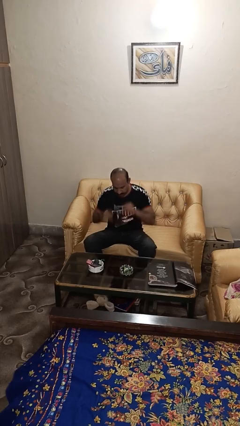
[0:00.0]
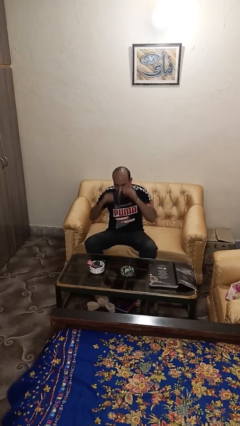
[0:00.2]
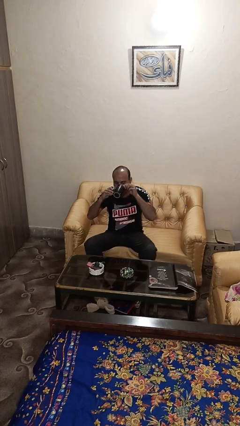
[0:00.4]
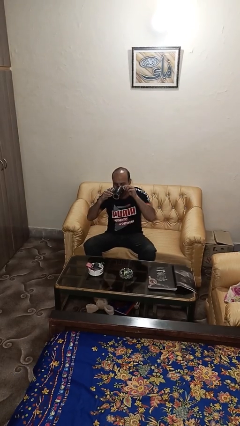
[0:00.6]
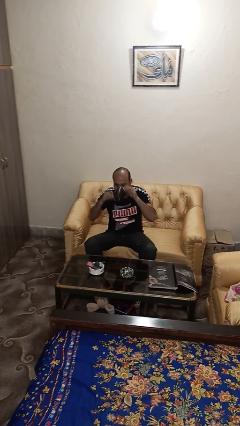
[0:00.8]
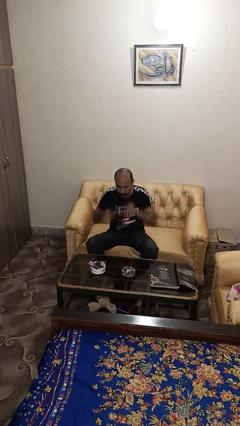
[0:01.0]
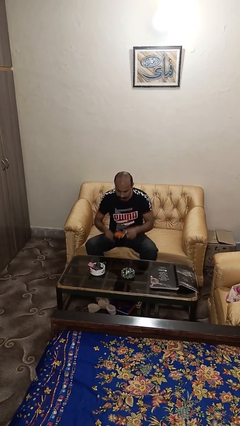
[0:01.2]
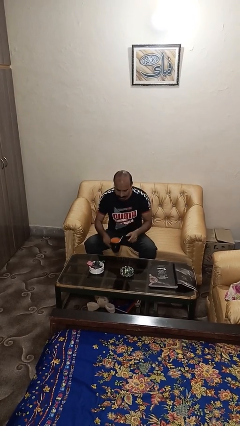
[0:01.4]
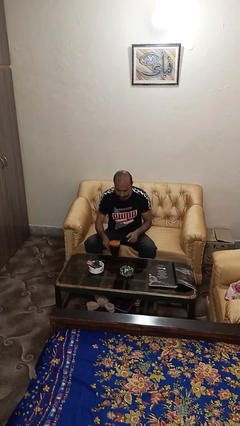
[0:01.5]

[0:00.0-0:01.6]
person drinks from mug

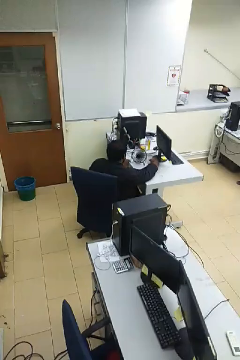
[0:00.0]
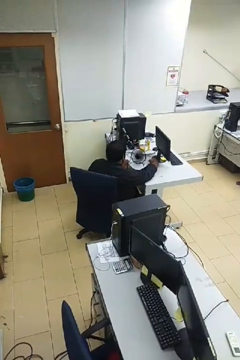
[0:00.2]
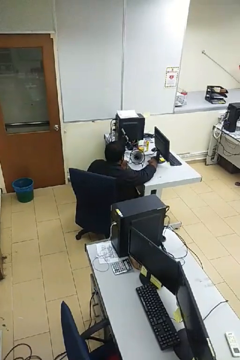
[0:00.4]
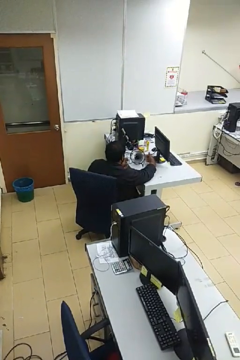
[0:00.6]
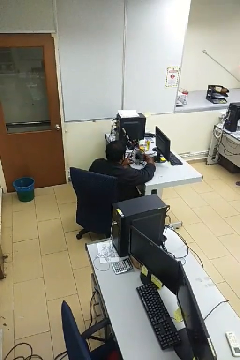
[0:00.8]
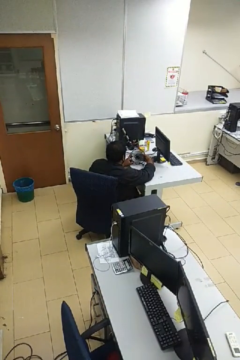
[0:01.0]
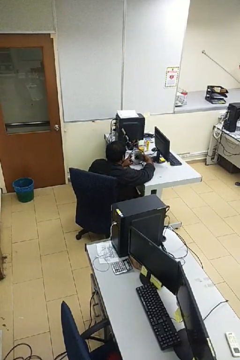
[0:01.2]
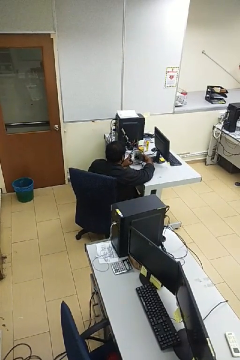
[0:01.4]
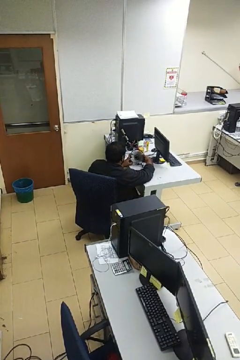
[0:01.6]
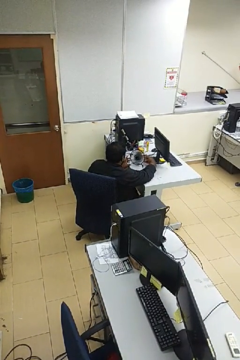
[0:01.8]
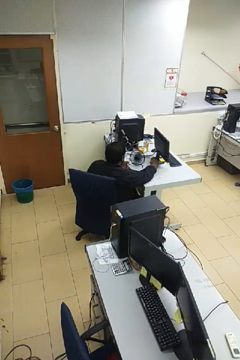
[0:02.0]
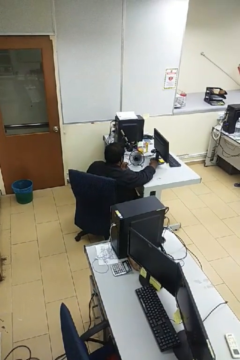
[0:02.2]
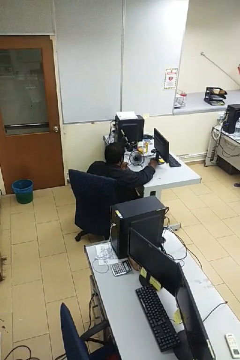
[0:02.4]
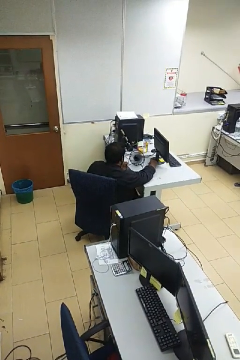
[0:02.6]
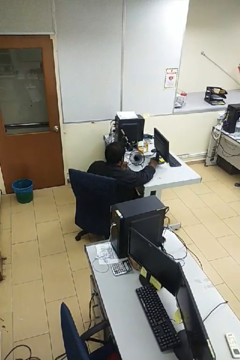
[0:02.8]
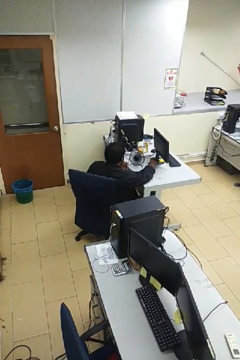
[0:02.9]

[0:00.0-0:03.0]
person turns on fan

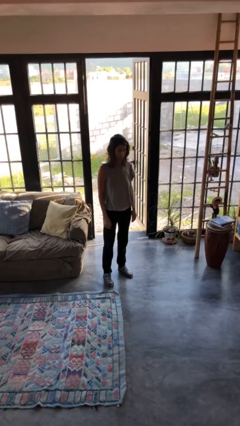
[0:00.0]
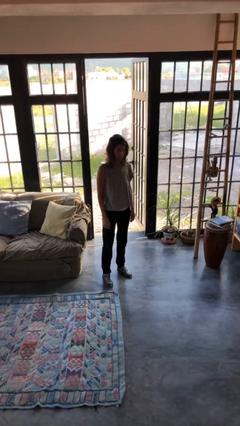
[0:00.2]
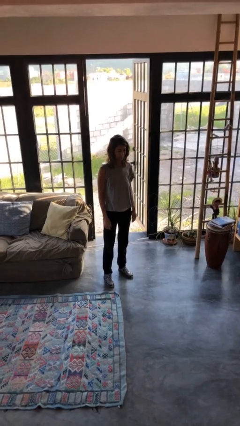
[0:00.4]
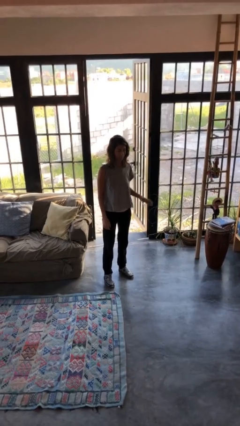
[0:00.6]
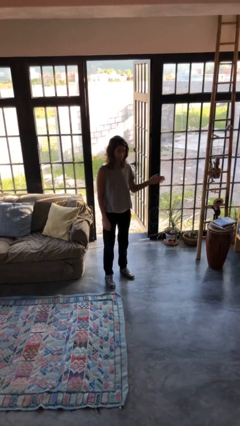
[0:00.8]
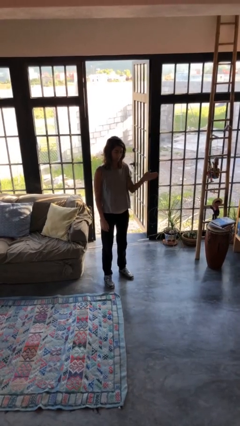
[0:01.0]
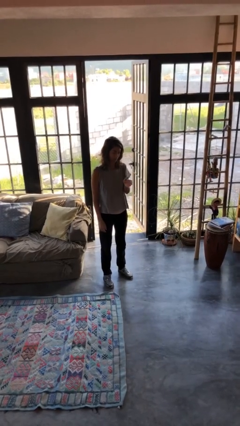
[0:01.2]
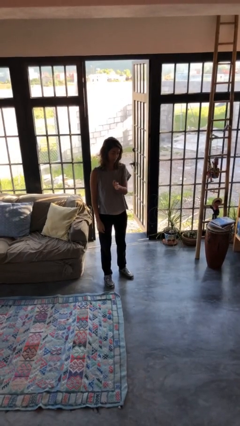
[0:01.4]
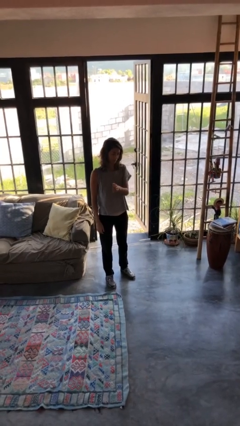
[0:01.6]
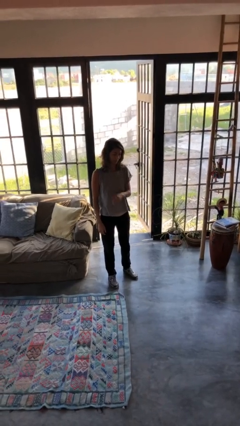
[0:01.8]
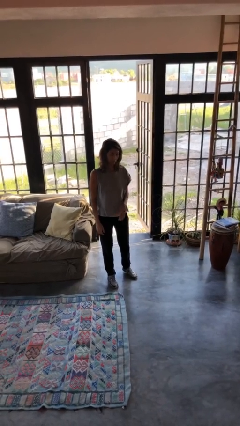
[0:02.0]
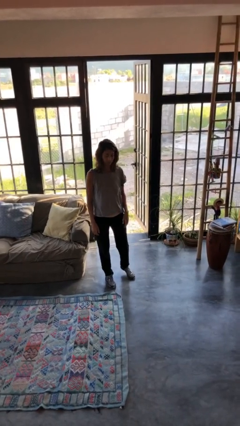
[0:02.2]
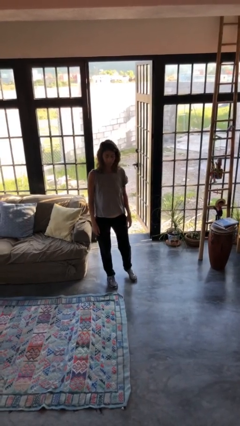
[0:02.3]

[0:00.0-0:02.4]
person gestures swipe right

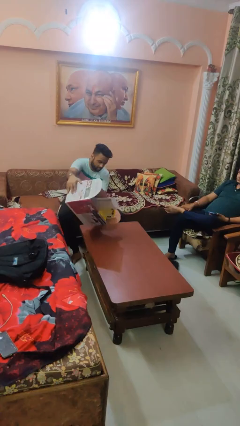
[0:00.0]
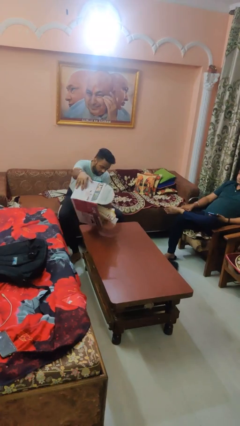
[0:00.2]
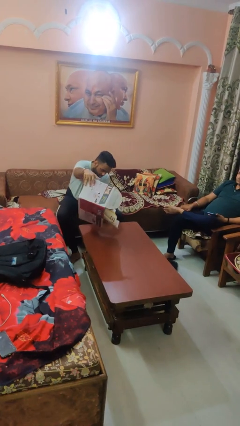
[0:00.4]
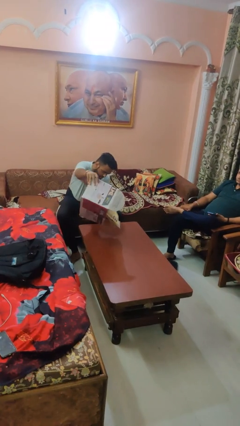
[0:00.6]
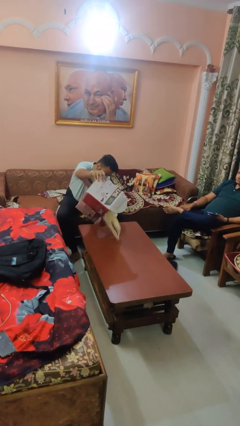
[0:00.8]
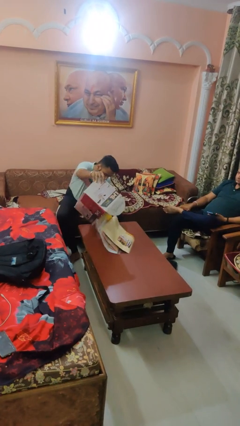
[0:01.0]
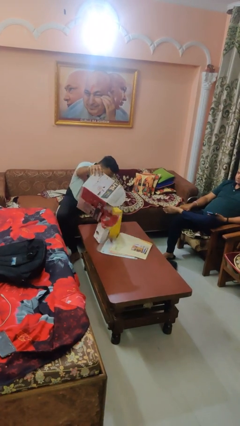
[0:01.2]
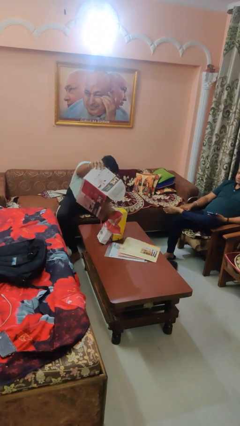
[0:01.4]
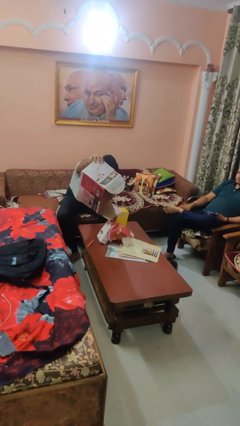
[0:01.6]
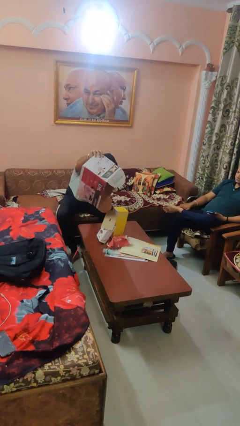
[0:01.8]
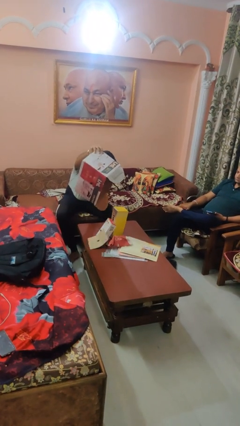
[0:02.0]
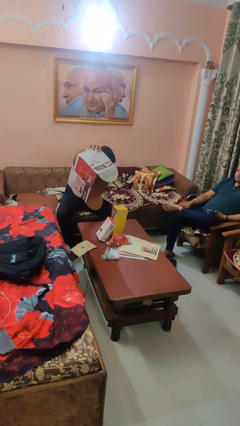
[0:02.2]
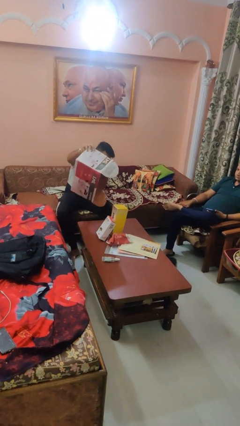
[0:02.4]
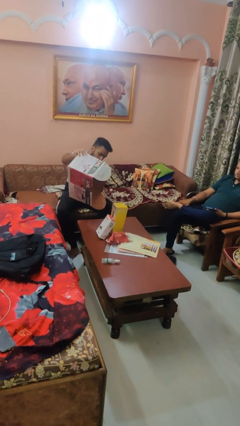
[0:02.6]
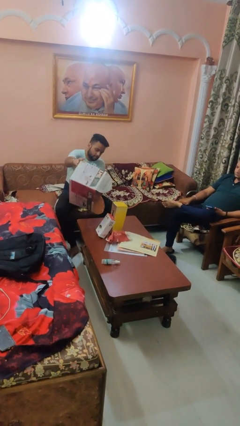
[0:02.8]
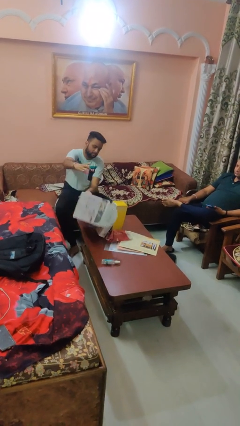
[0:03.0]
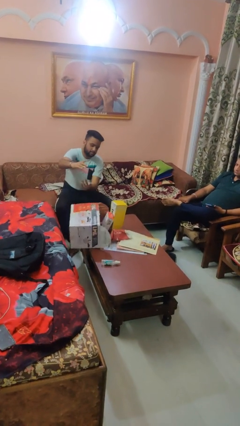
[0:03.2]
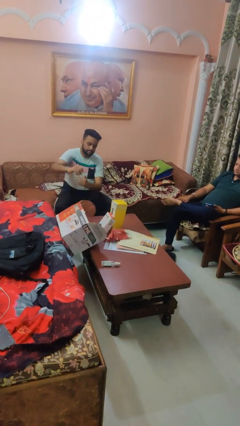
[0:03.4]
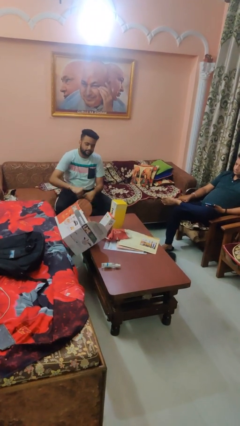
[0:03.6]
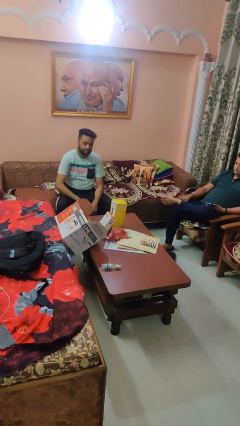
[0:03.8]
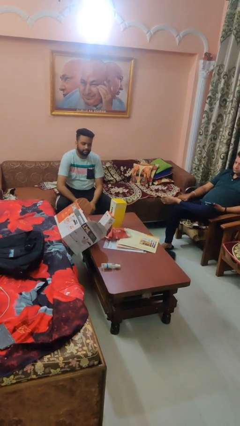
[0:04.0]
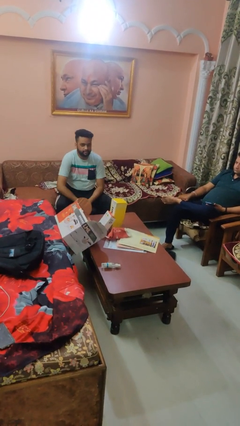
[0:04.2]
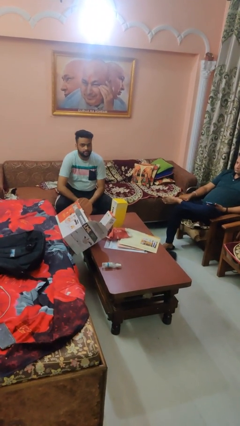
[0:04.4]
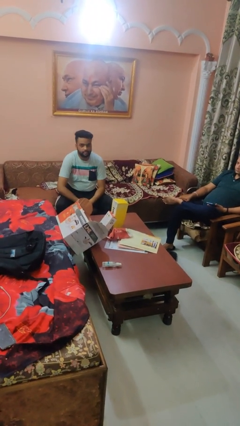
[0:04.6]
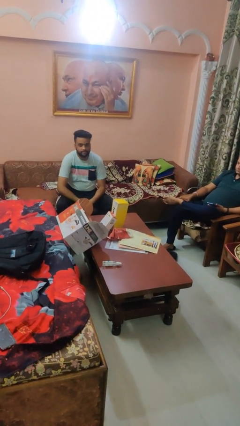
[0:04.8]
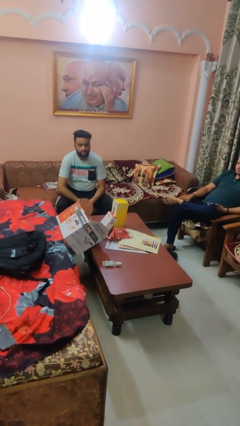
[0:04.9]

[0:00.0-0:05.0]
person unloads box onto table

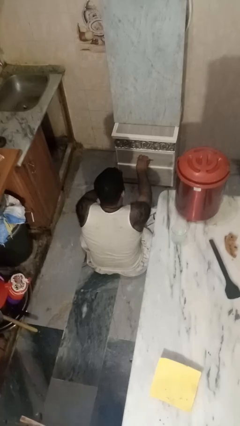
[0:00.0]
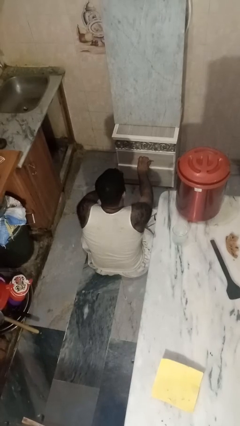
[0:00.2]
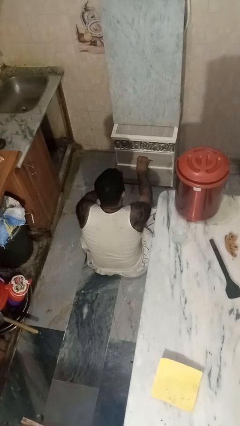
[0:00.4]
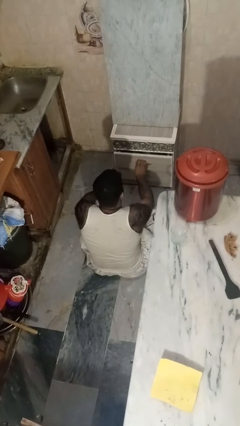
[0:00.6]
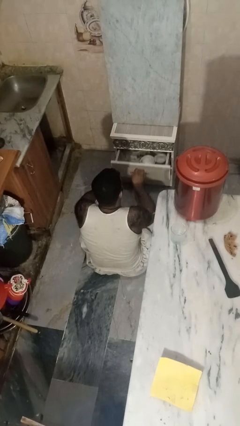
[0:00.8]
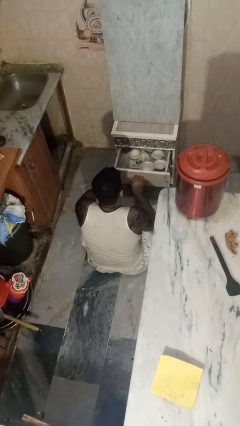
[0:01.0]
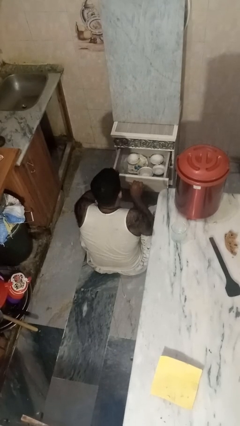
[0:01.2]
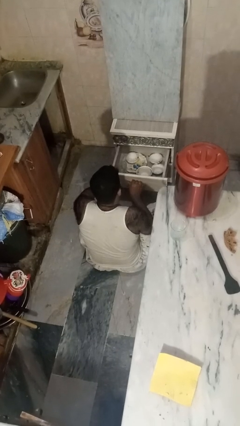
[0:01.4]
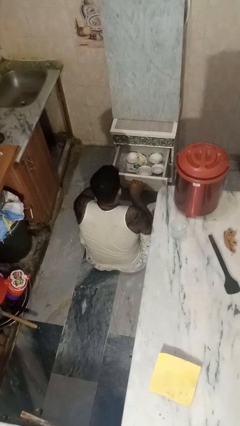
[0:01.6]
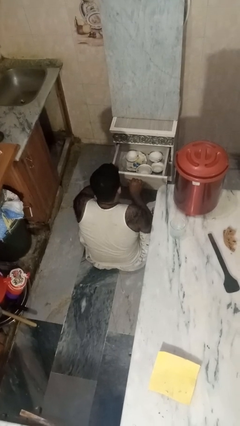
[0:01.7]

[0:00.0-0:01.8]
person opens kitchen drawer

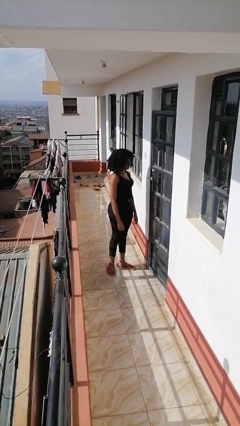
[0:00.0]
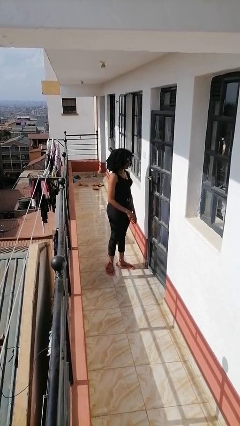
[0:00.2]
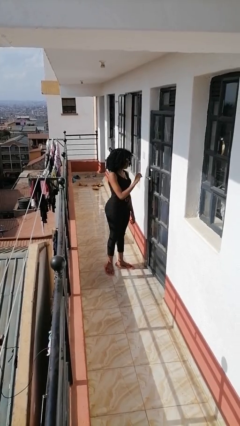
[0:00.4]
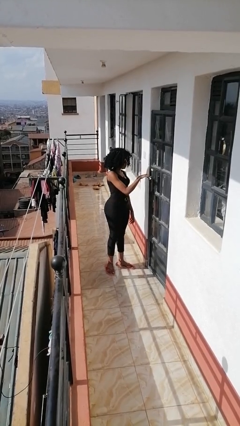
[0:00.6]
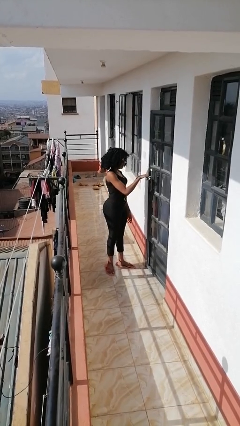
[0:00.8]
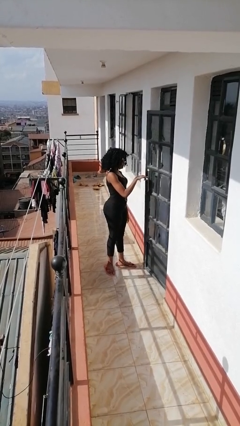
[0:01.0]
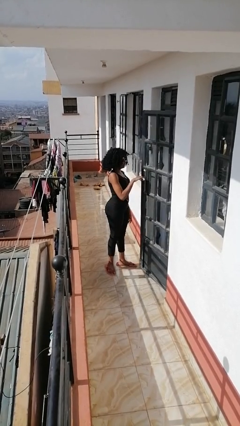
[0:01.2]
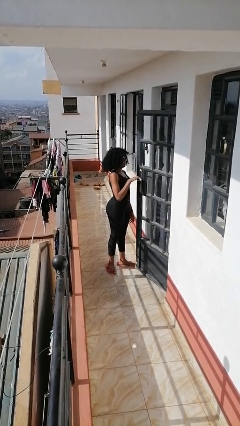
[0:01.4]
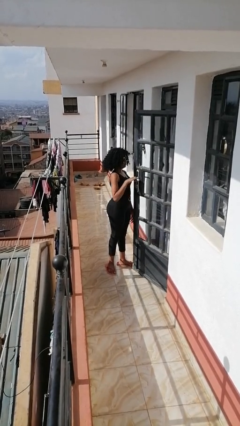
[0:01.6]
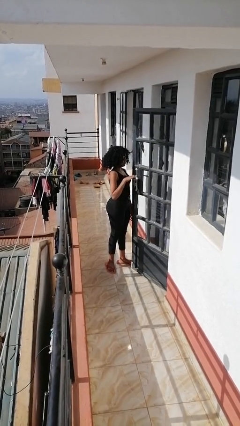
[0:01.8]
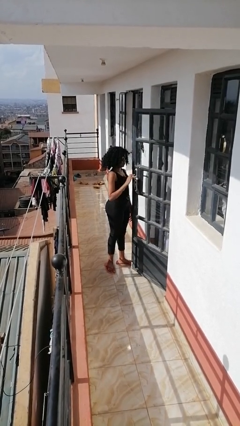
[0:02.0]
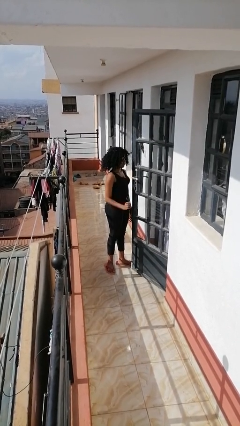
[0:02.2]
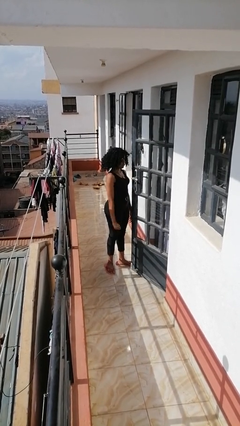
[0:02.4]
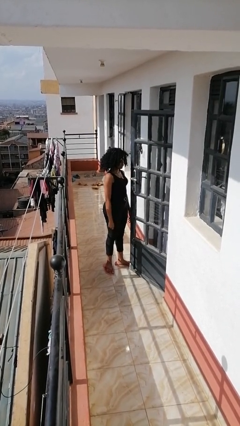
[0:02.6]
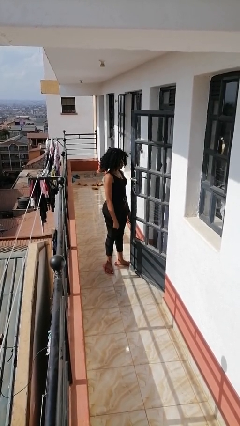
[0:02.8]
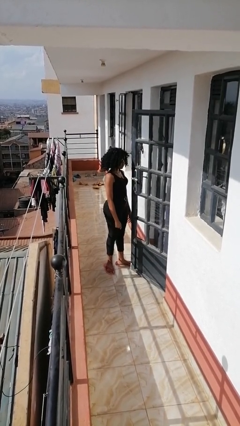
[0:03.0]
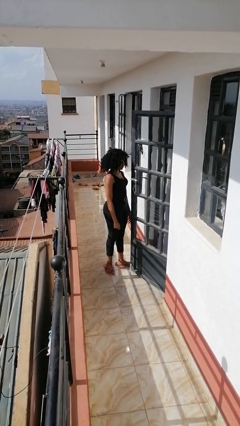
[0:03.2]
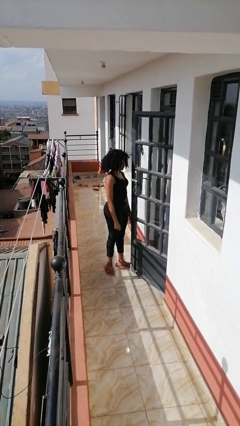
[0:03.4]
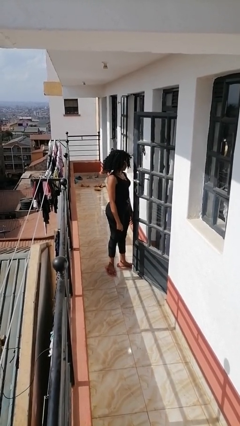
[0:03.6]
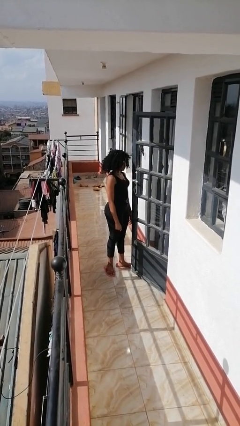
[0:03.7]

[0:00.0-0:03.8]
person opens facility door

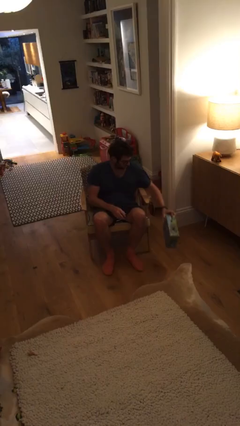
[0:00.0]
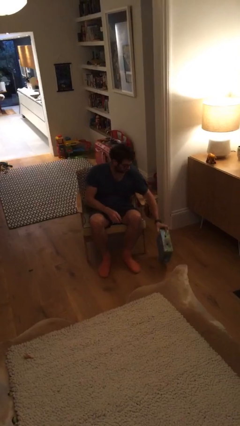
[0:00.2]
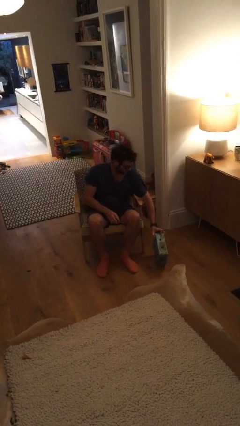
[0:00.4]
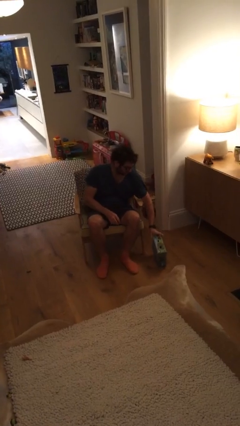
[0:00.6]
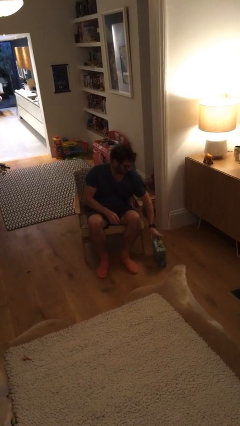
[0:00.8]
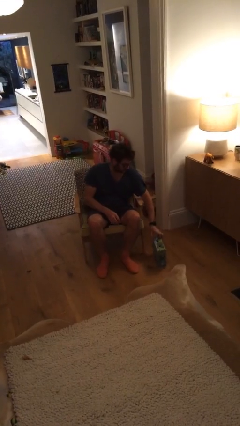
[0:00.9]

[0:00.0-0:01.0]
person puts down object on floor
